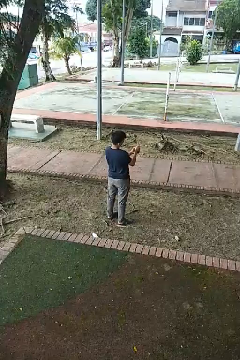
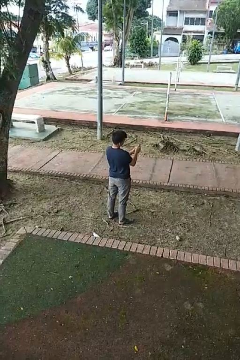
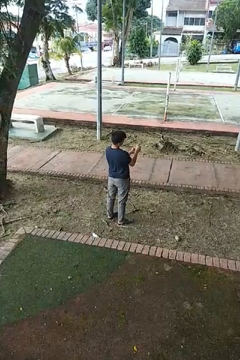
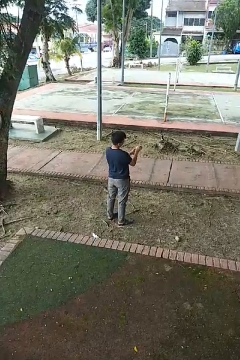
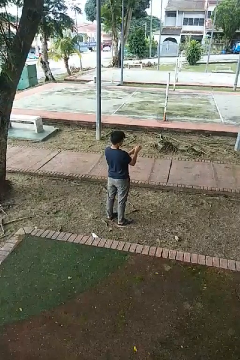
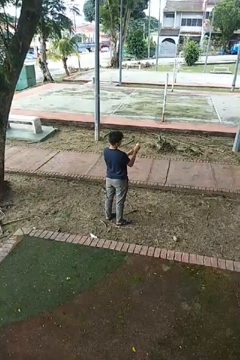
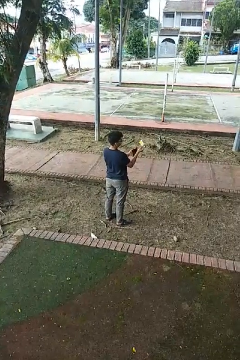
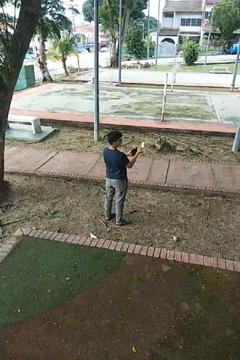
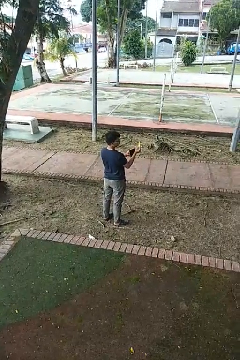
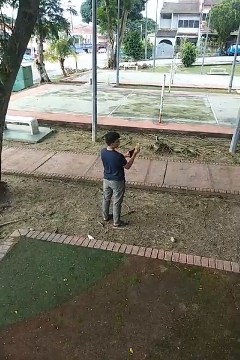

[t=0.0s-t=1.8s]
person takes object from purse

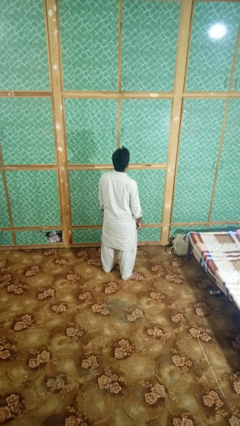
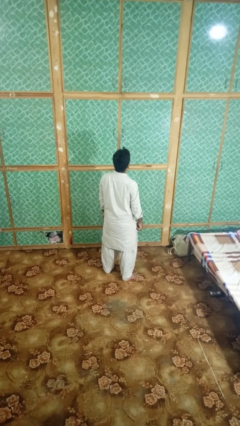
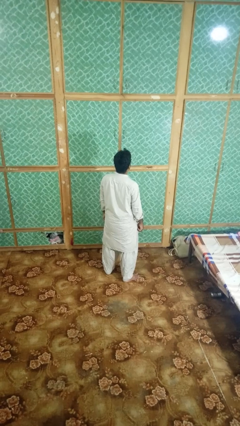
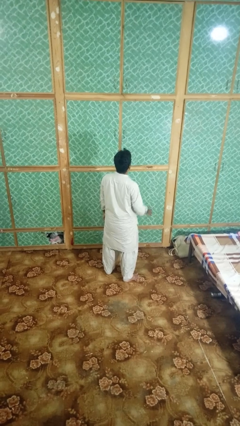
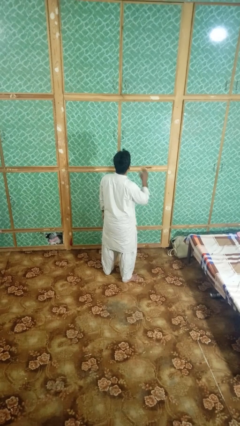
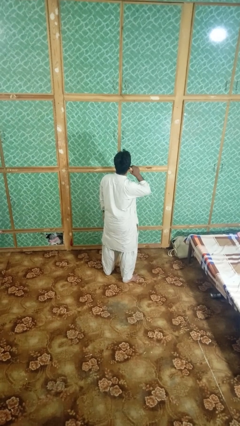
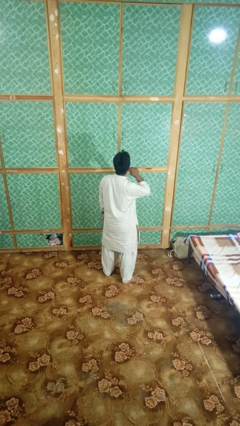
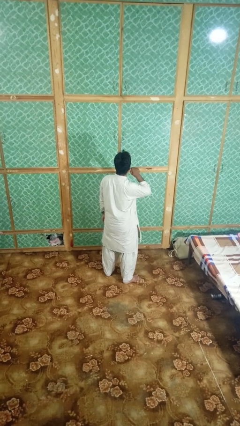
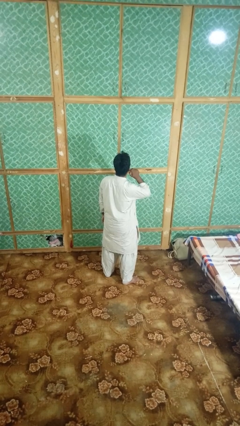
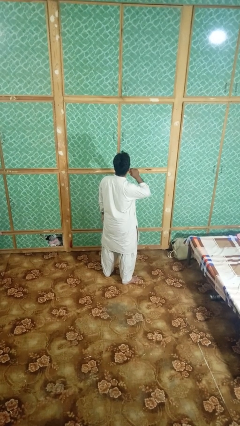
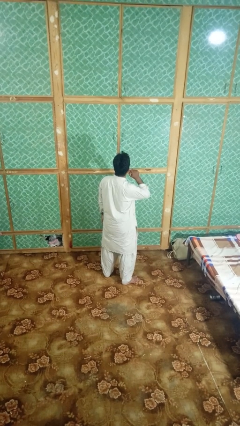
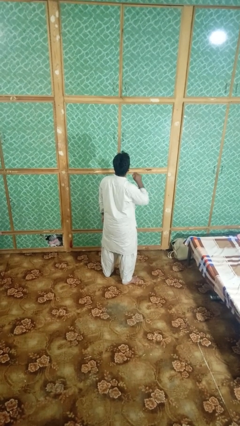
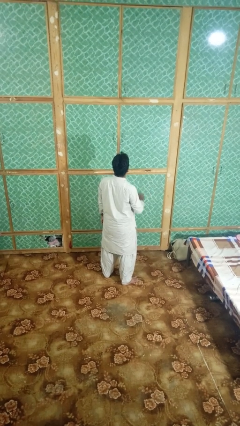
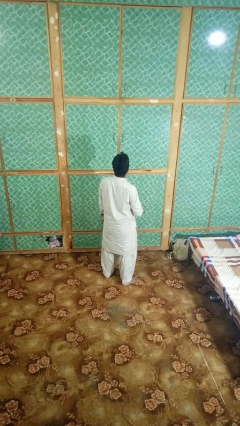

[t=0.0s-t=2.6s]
person touches earlobe

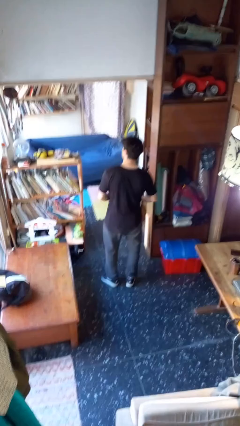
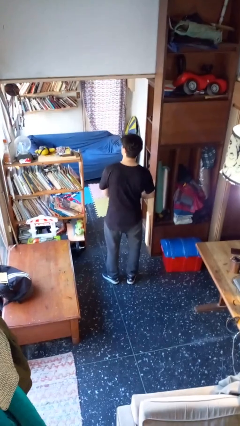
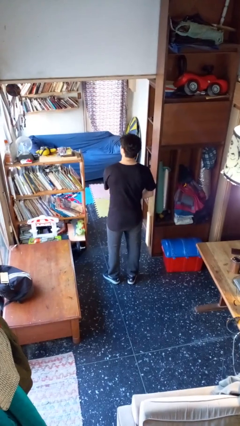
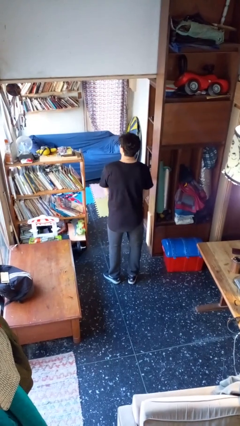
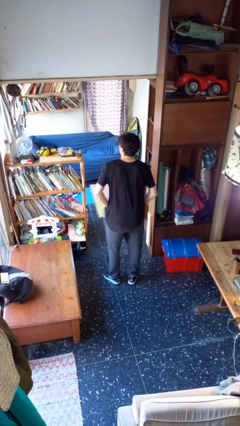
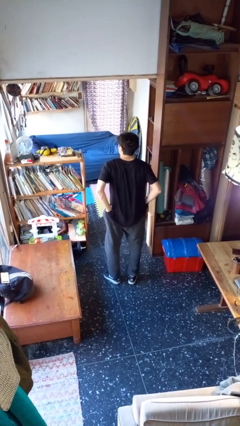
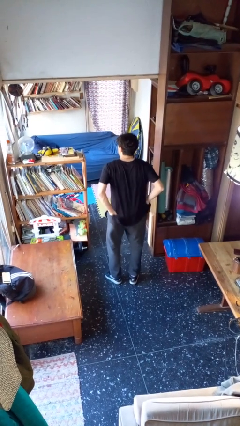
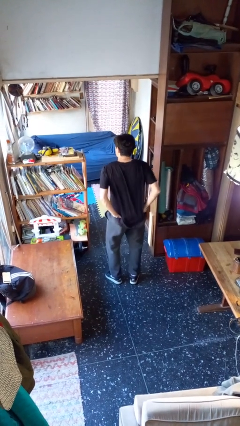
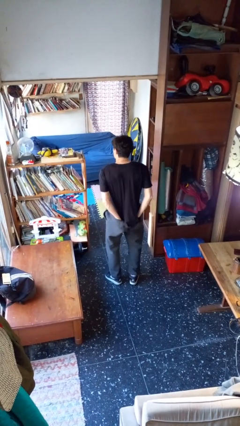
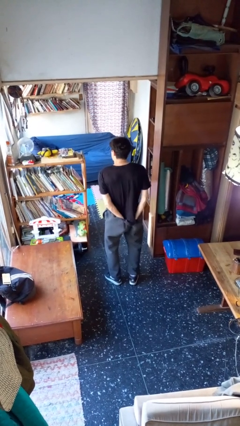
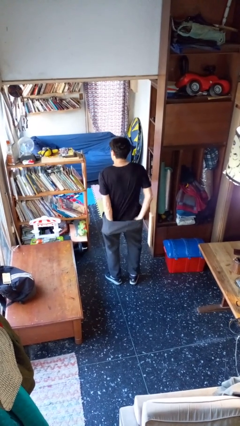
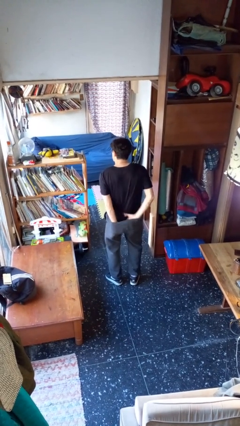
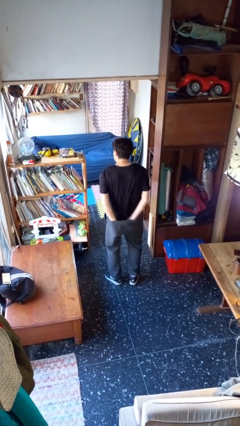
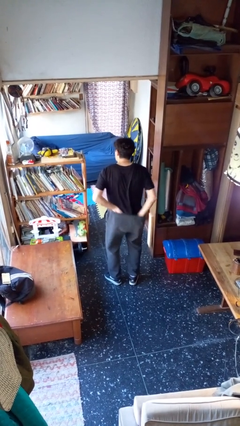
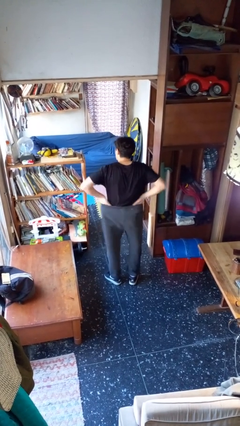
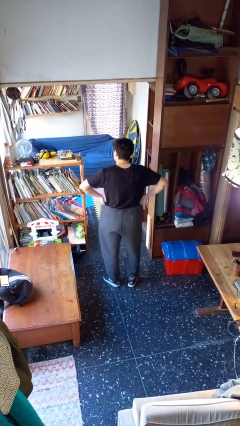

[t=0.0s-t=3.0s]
person tucks in shirt

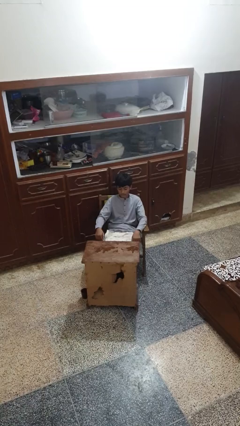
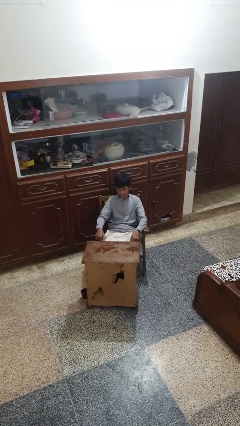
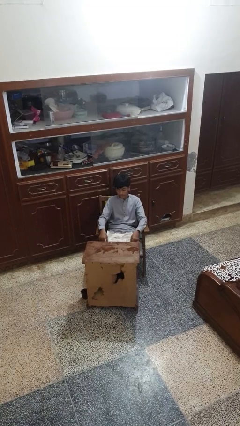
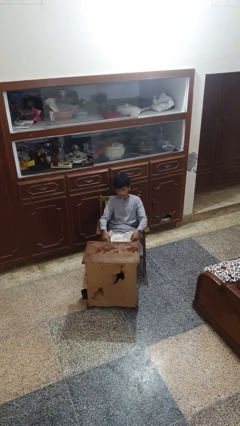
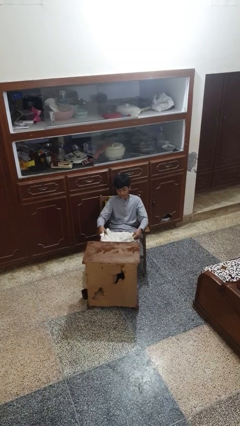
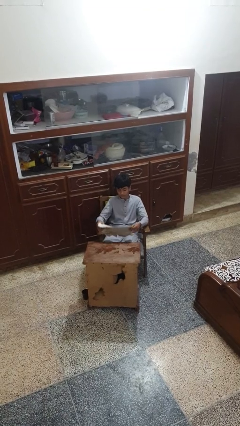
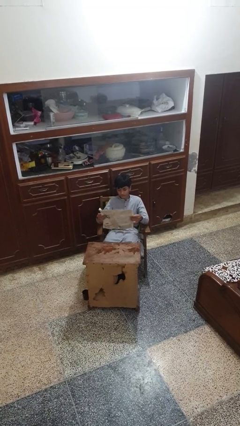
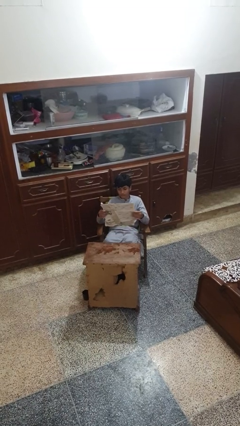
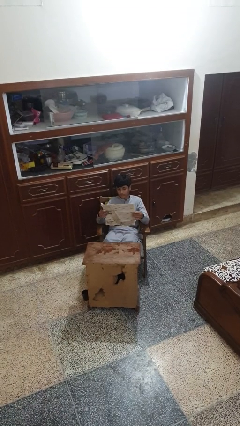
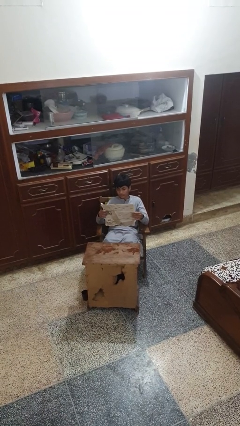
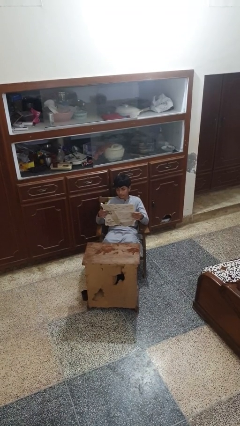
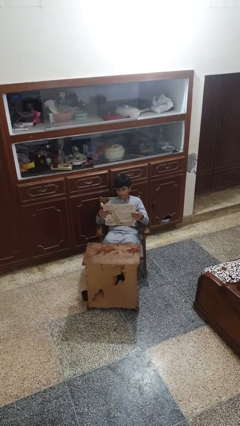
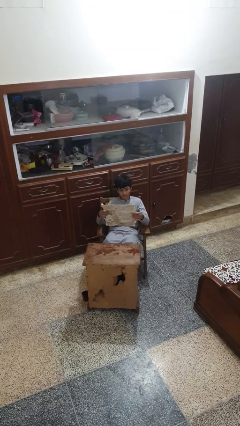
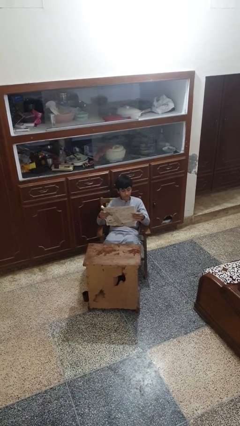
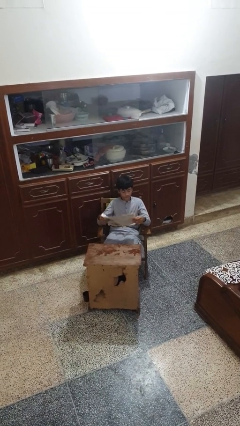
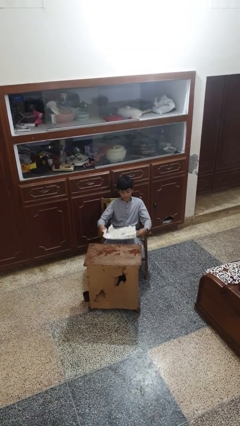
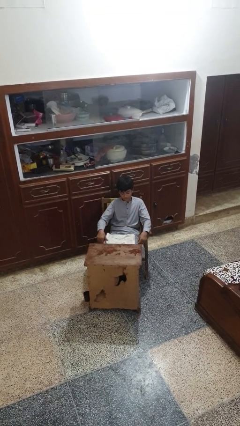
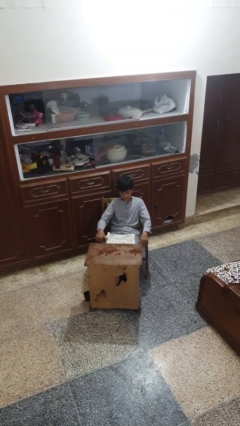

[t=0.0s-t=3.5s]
person reads newspaper

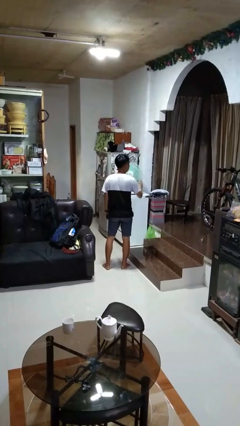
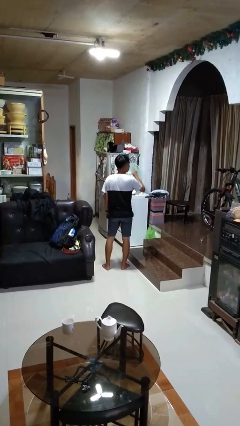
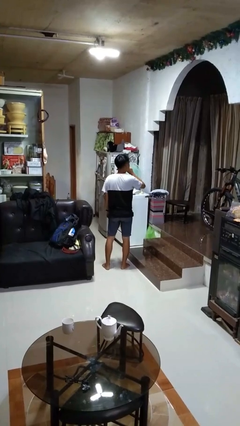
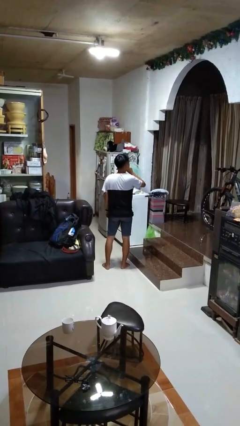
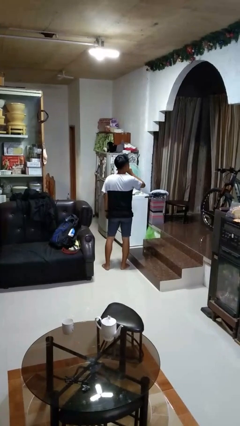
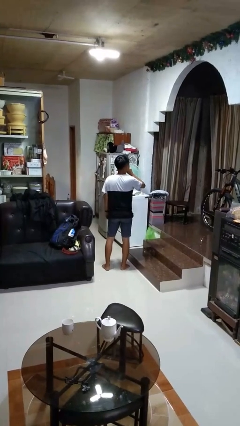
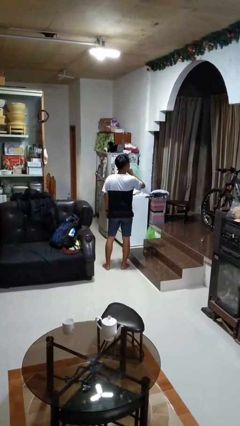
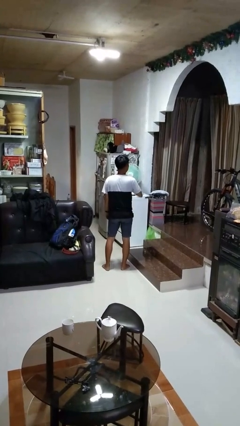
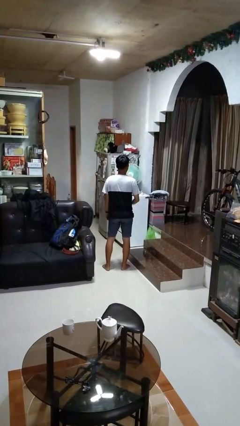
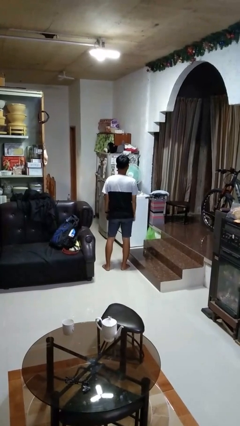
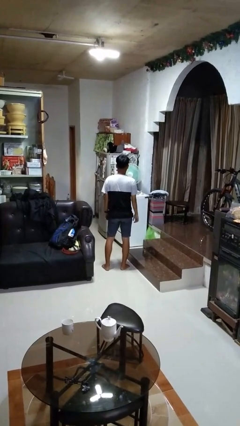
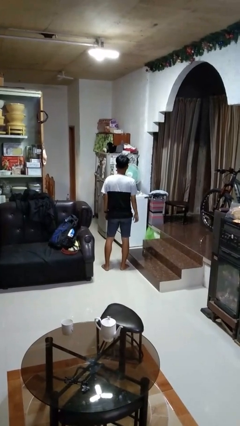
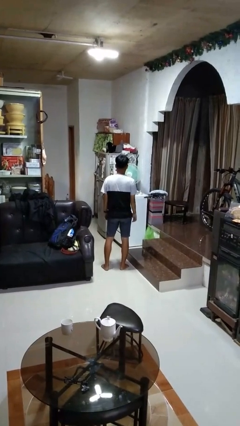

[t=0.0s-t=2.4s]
person gestures be quiet

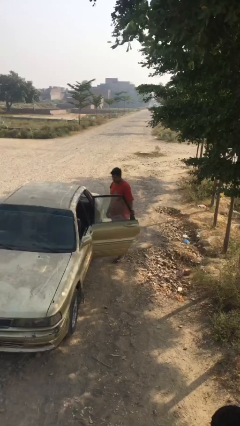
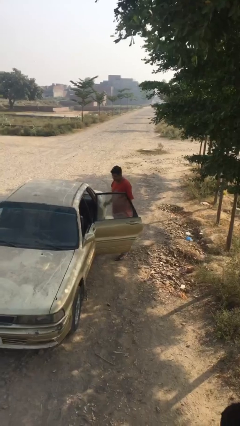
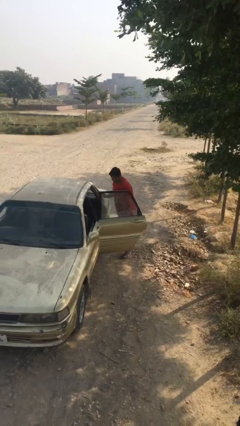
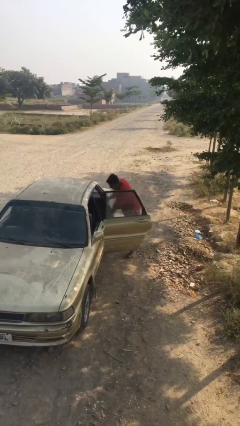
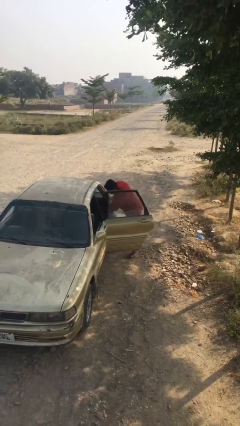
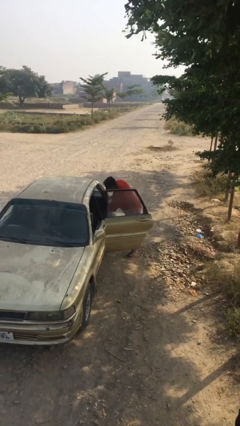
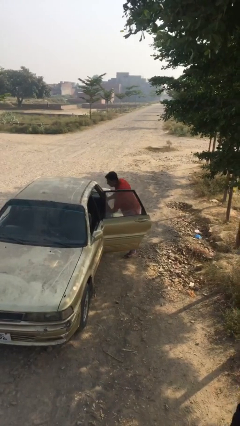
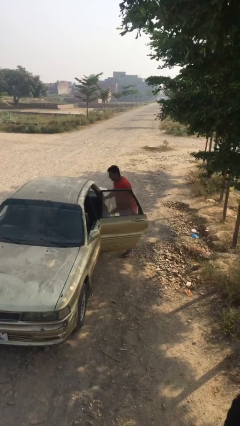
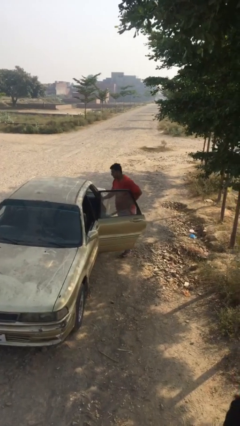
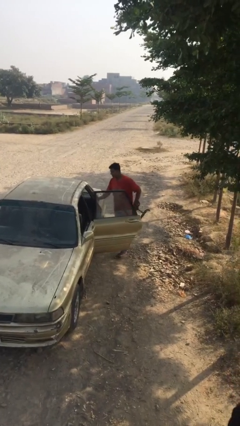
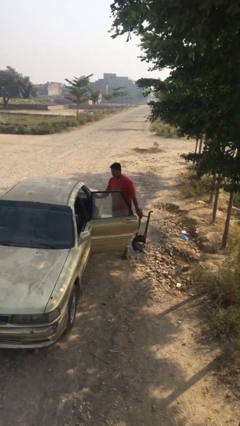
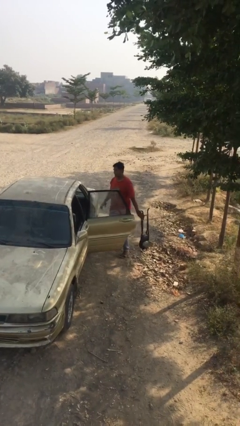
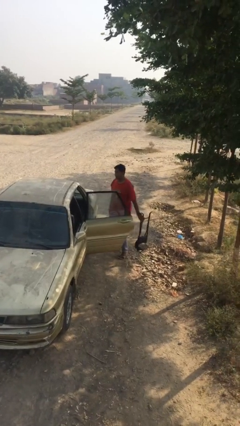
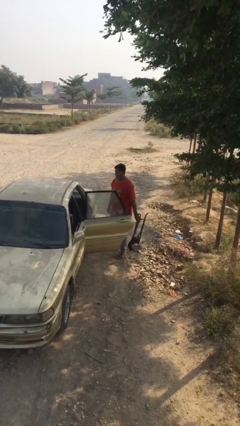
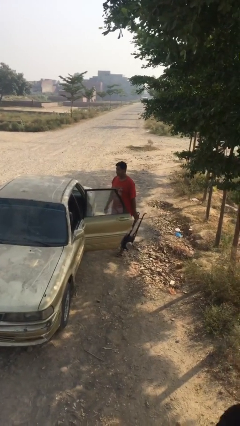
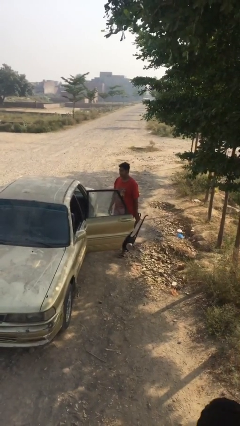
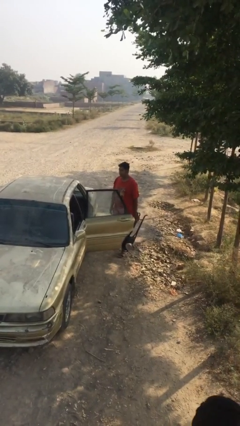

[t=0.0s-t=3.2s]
person unloads car

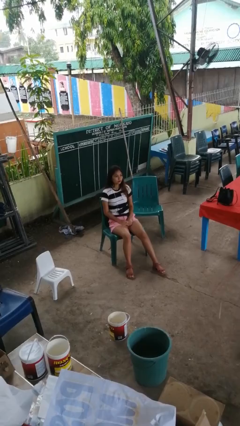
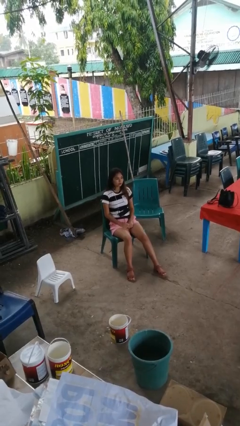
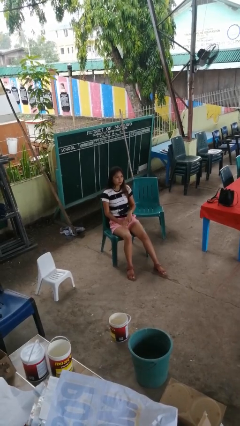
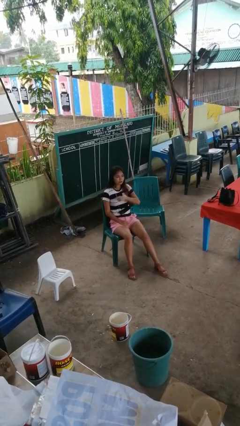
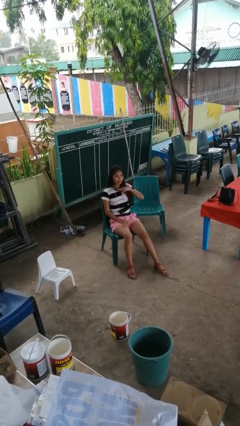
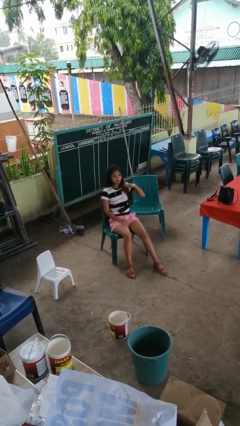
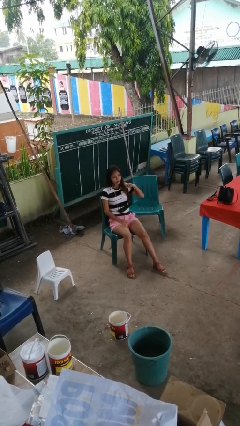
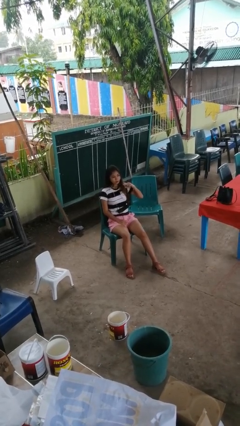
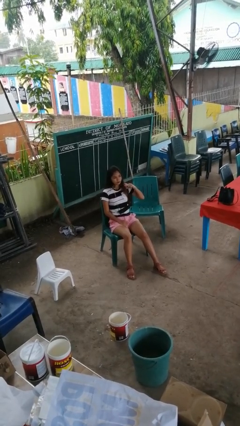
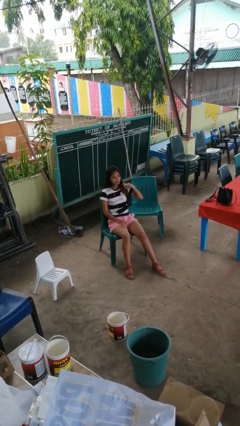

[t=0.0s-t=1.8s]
person gestures cut
